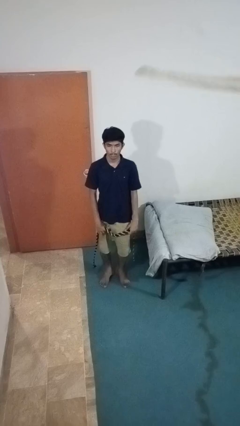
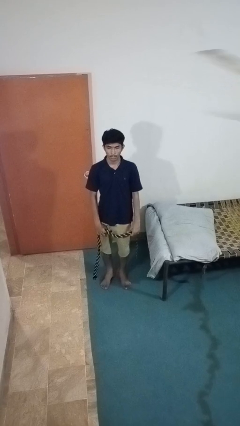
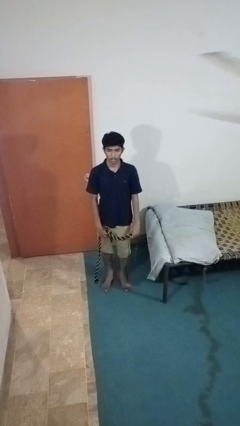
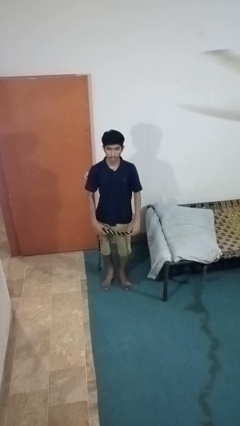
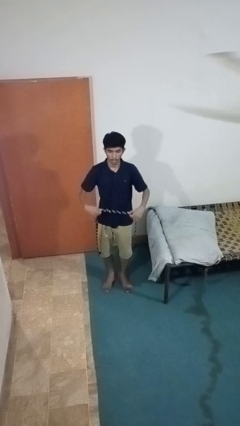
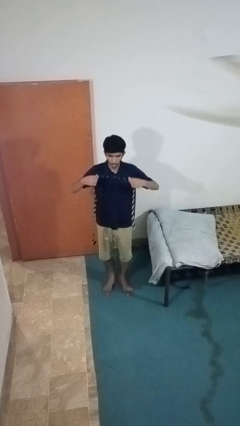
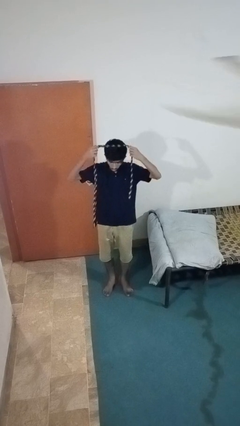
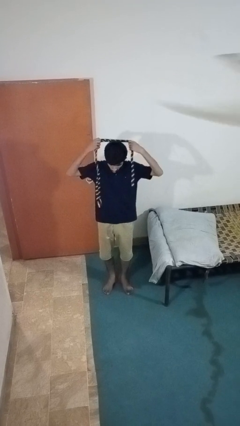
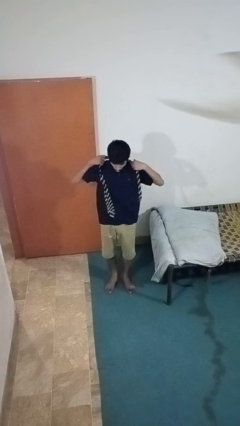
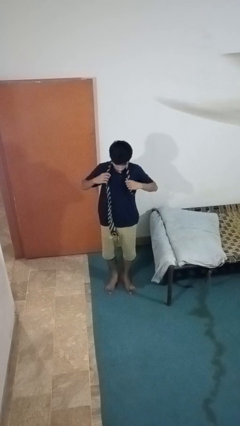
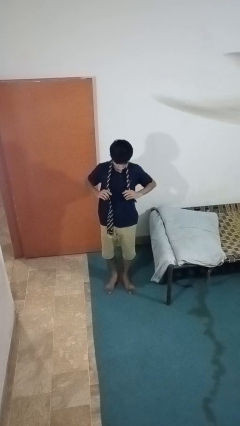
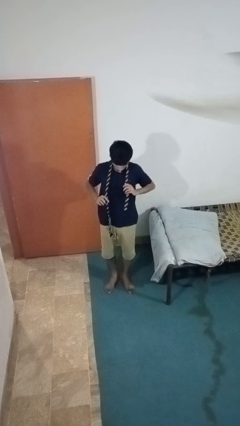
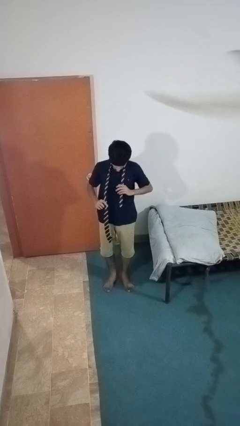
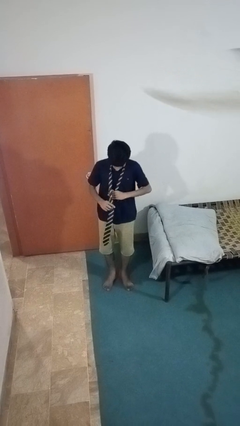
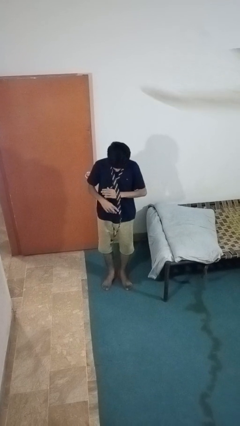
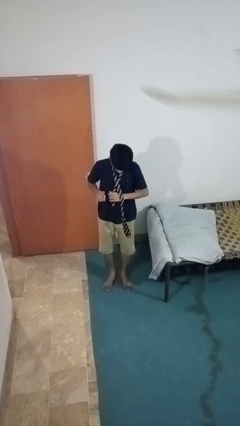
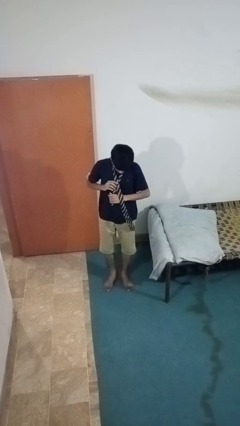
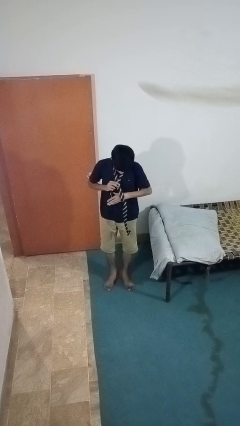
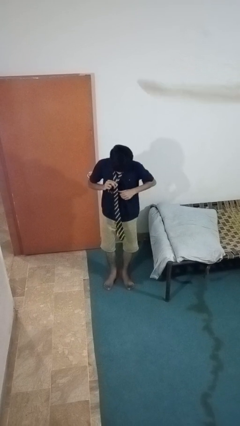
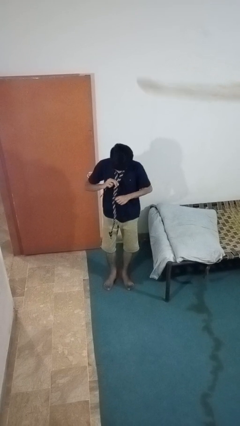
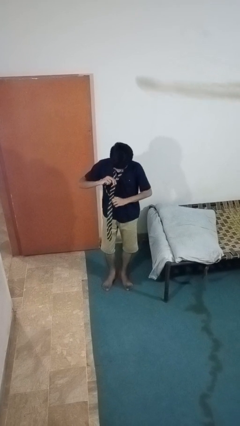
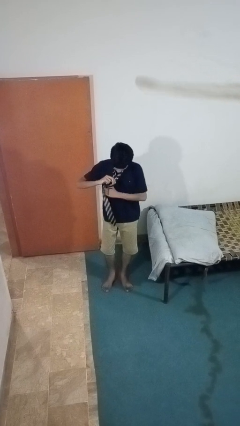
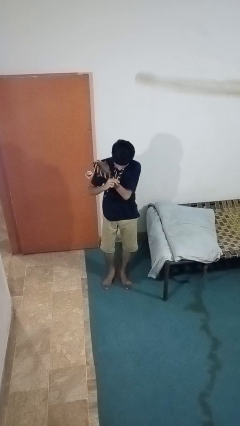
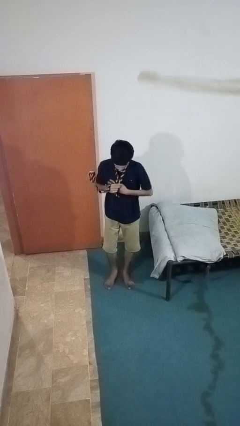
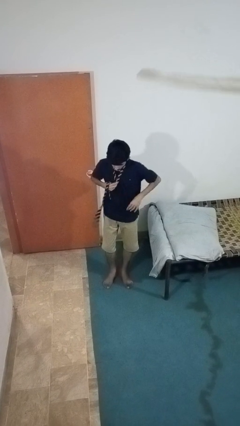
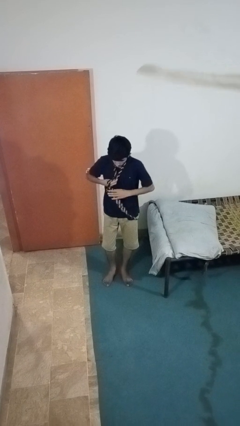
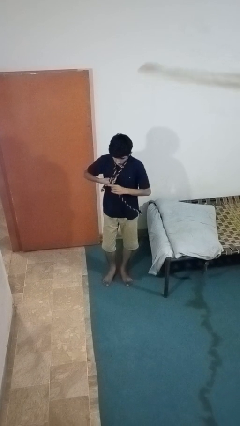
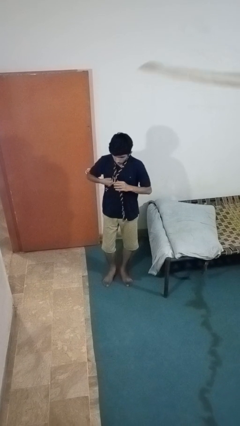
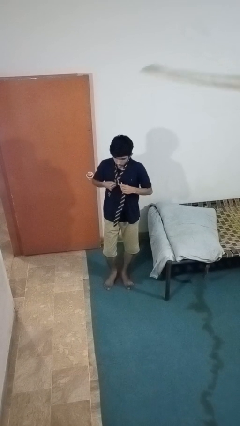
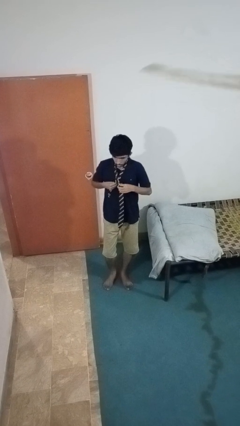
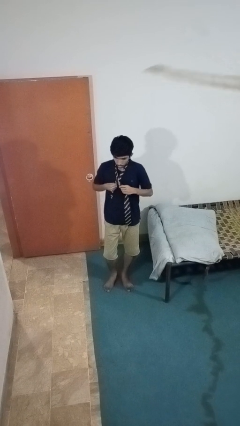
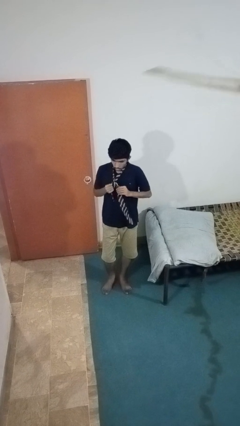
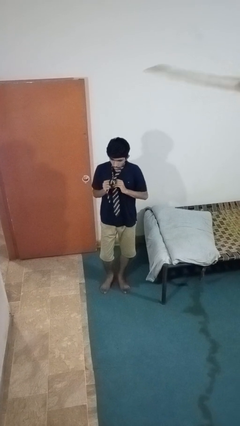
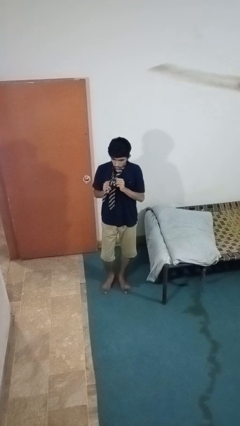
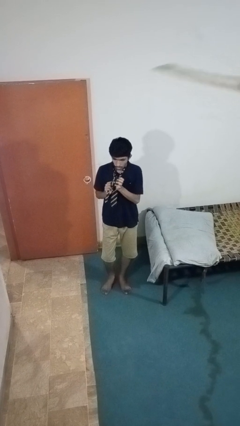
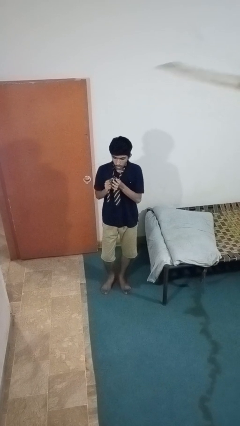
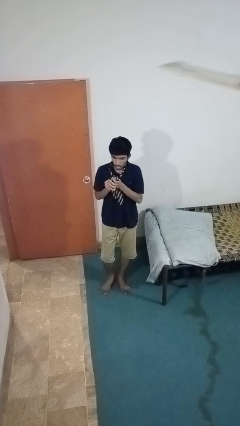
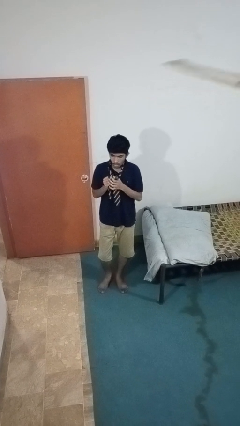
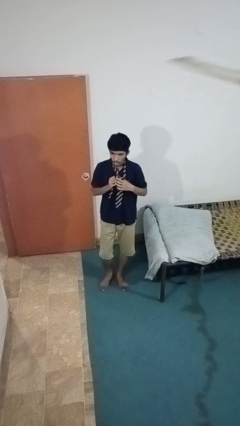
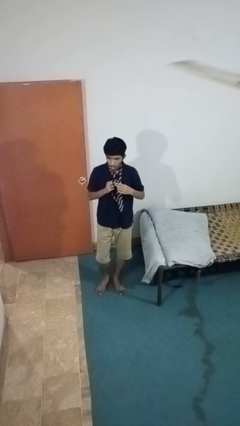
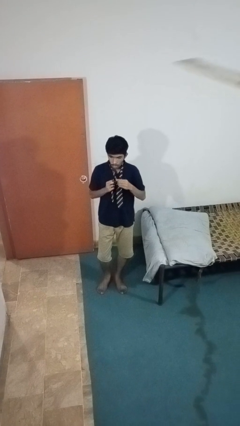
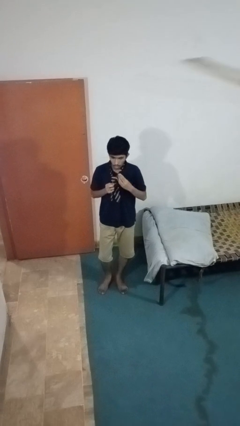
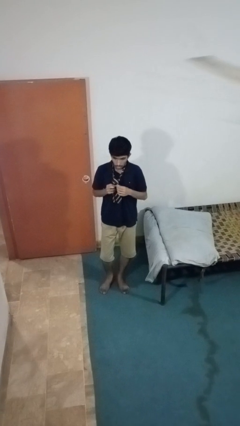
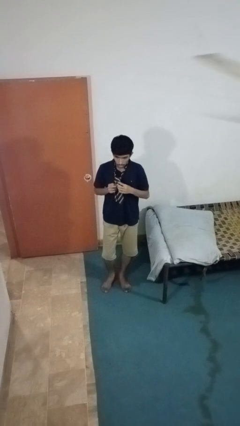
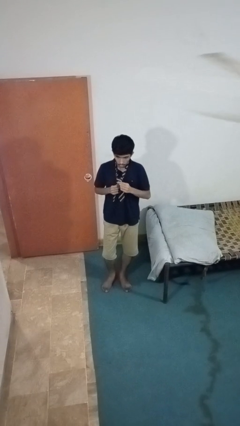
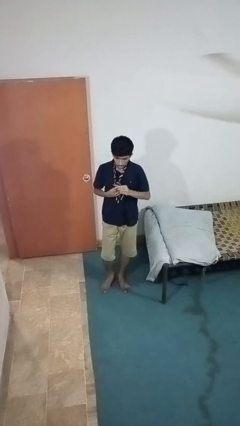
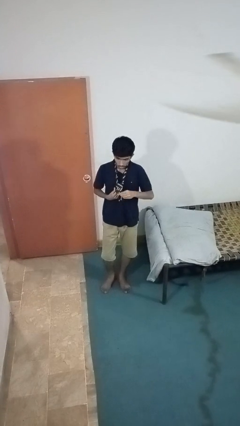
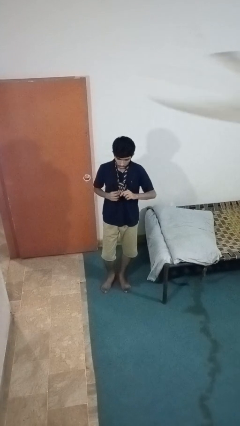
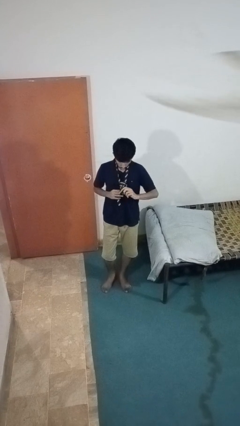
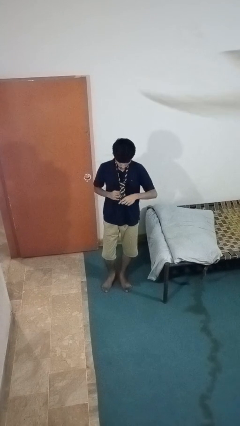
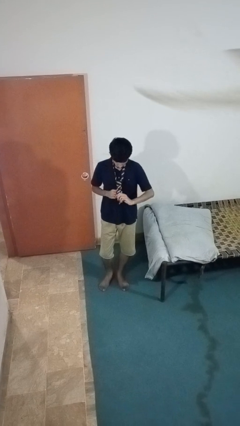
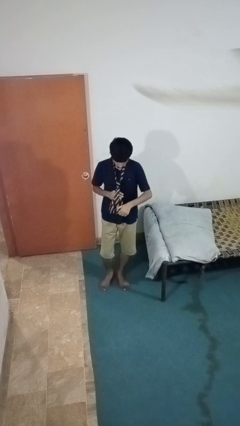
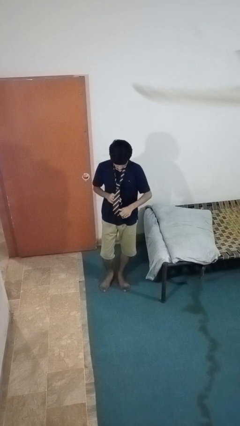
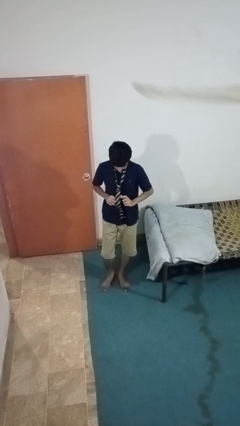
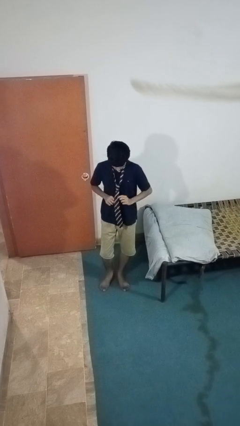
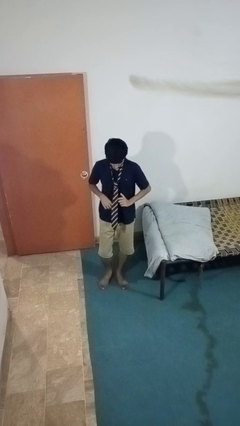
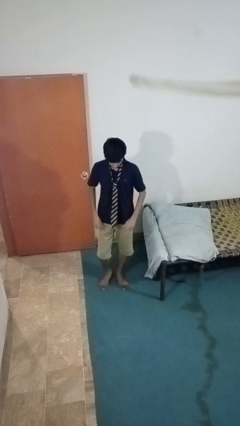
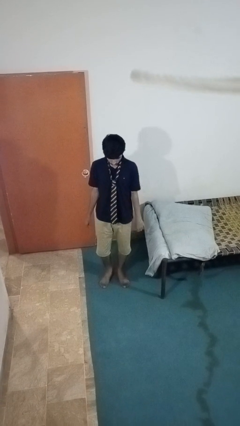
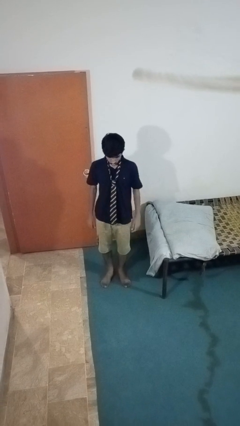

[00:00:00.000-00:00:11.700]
person puts on necktie

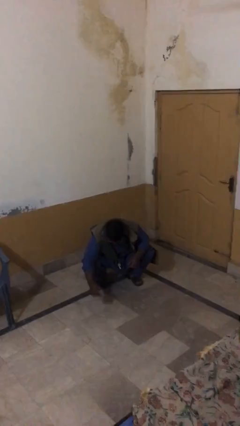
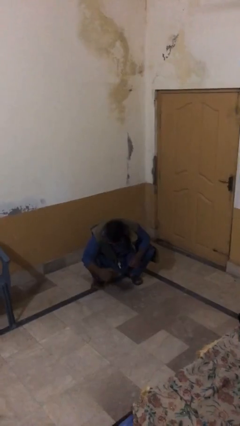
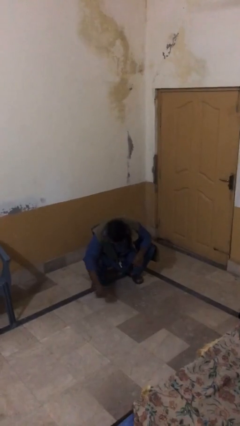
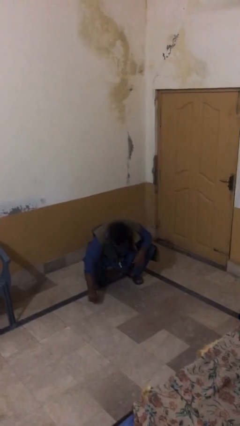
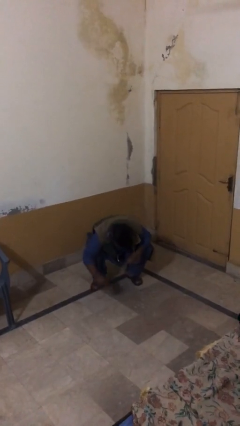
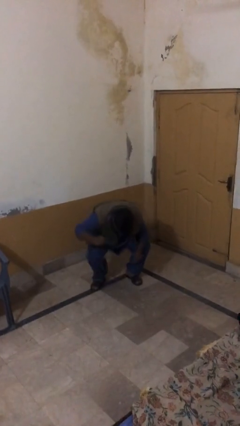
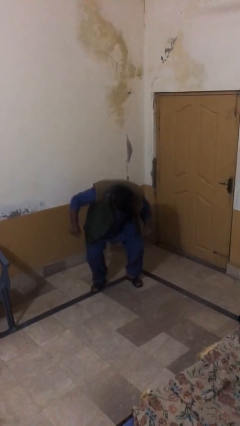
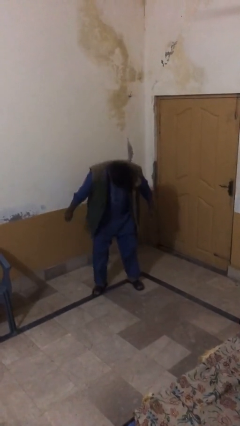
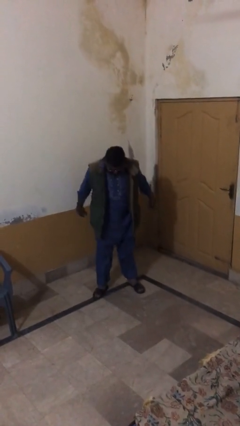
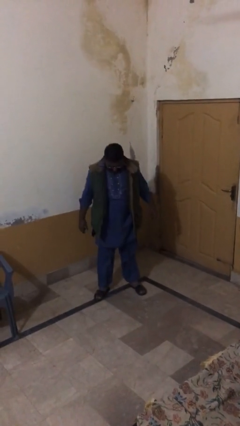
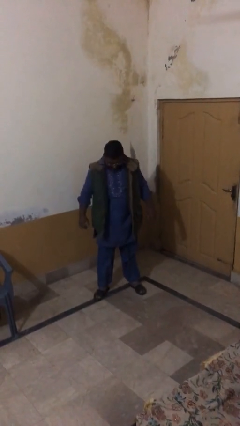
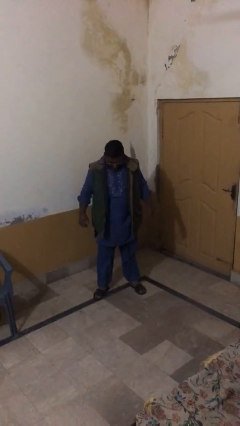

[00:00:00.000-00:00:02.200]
person stands up

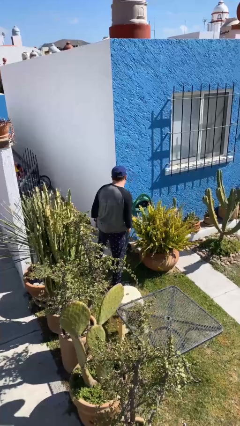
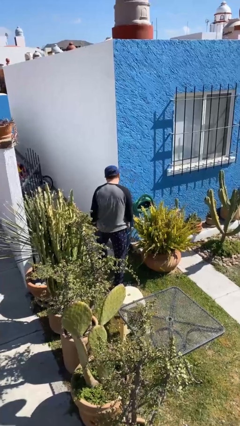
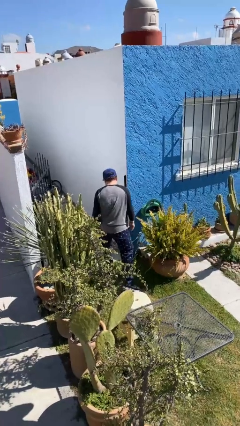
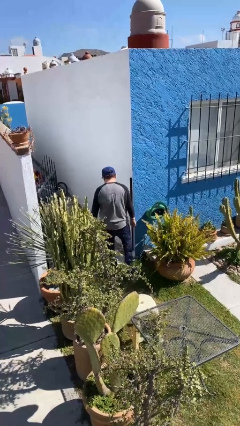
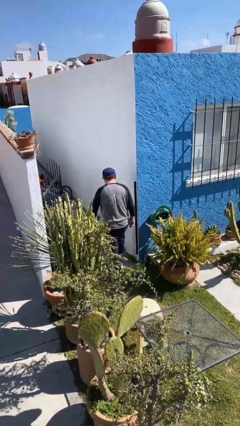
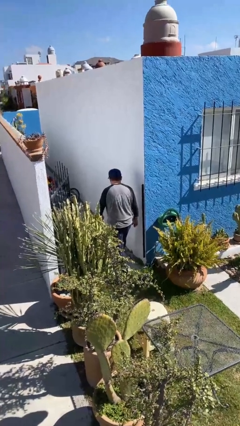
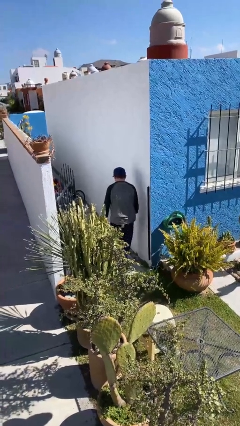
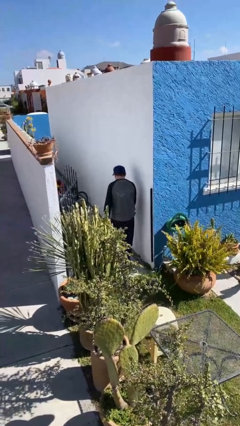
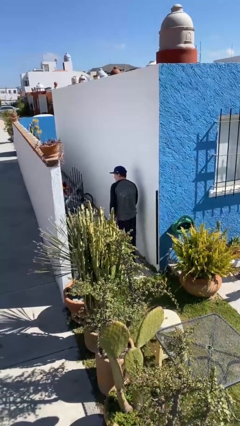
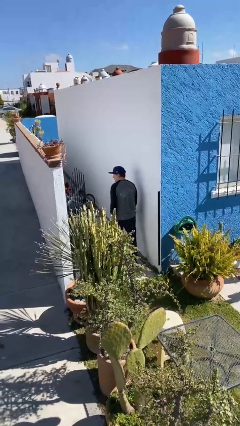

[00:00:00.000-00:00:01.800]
person exits scene through structure

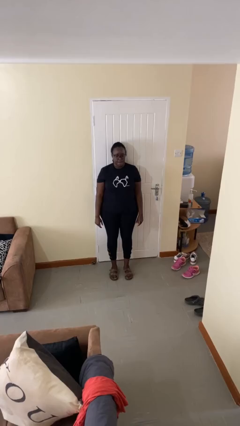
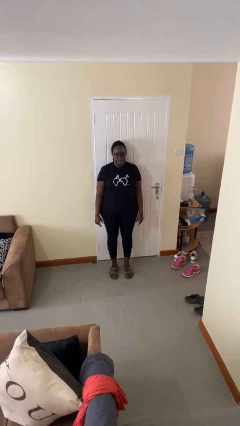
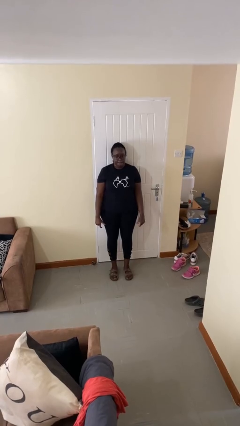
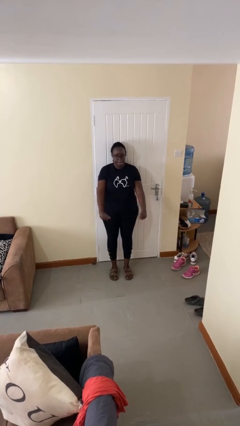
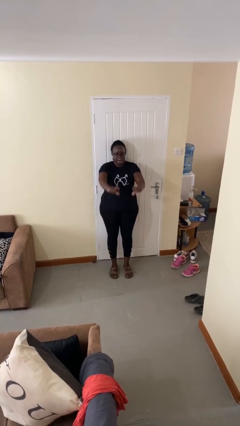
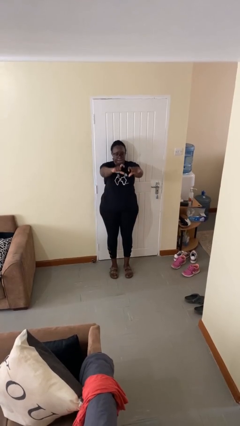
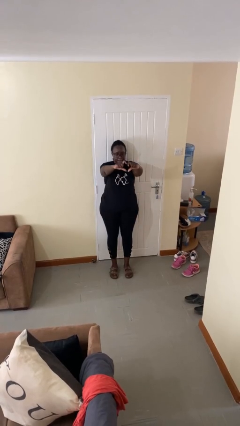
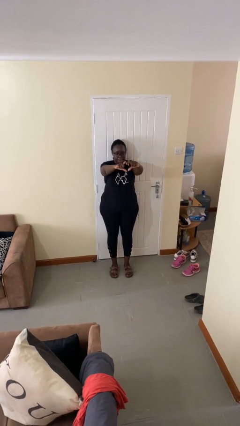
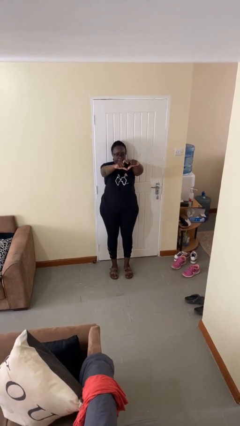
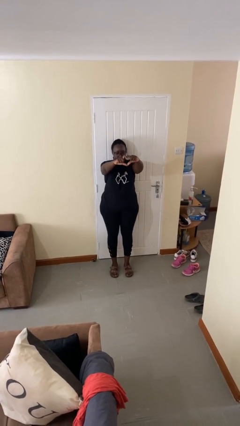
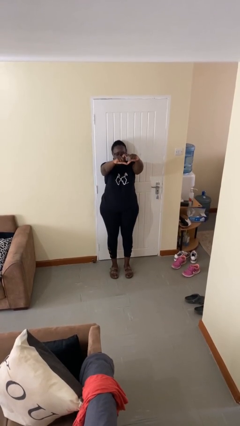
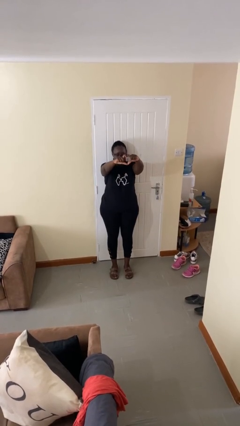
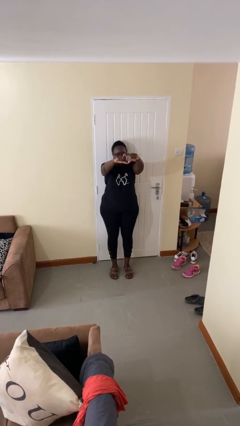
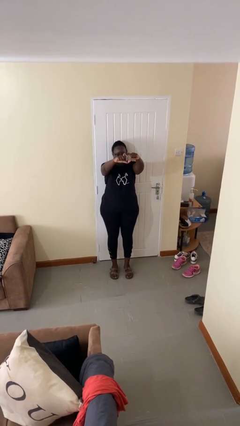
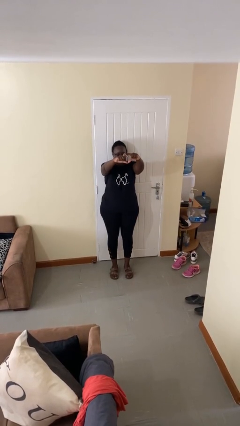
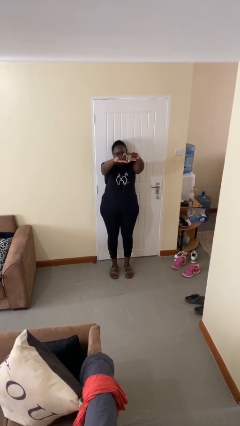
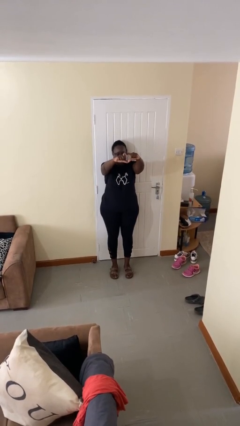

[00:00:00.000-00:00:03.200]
person gestures heart
